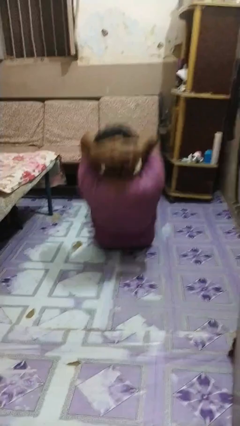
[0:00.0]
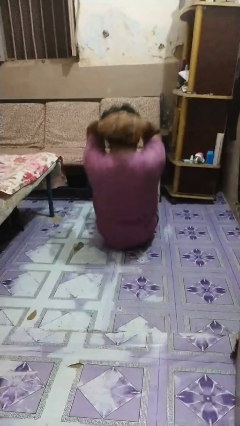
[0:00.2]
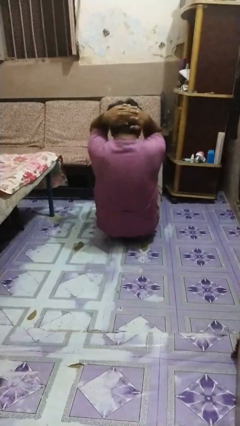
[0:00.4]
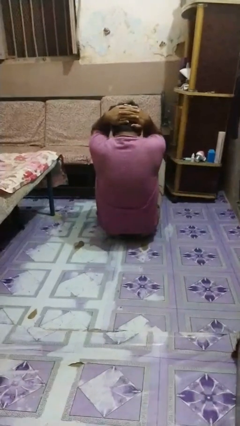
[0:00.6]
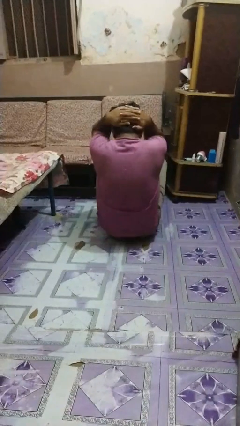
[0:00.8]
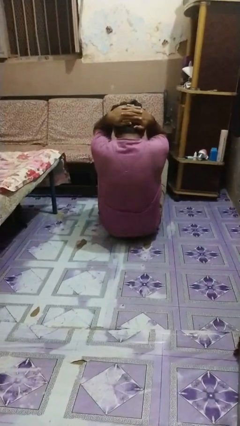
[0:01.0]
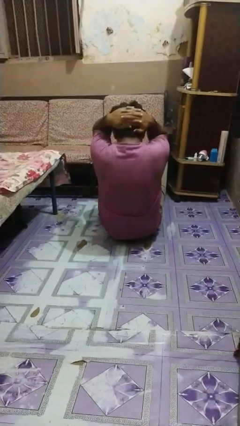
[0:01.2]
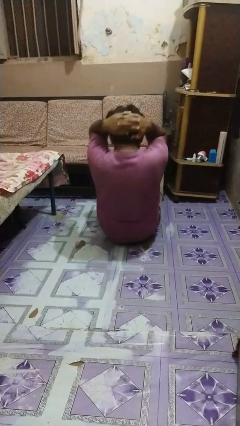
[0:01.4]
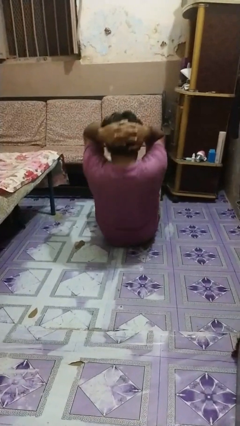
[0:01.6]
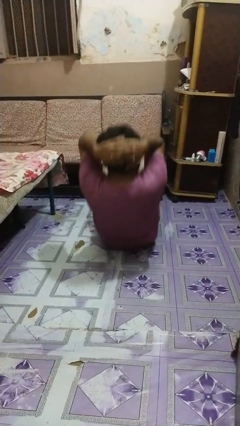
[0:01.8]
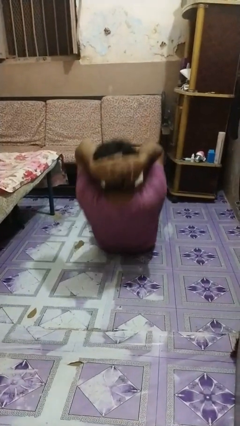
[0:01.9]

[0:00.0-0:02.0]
person exercises with situp

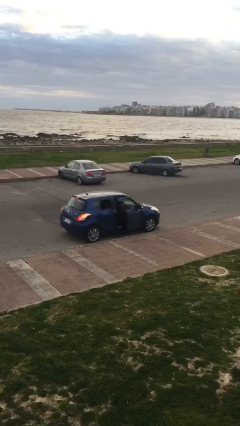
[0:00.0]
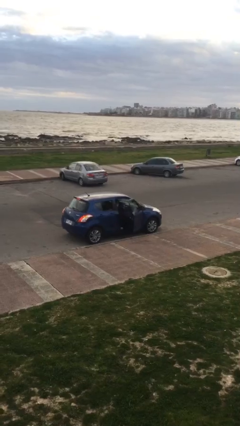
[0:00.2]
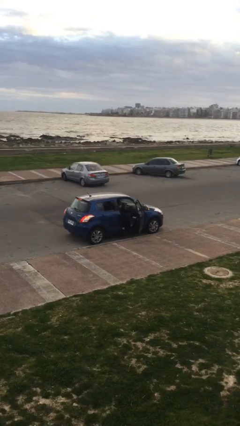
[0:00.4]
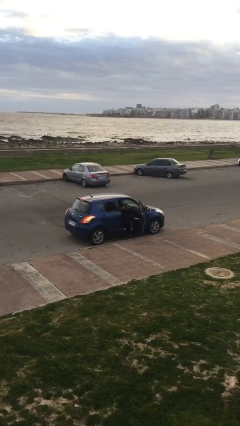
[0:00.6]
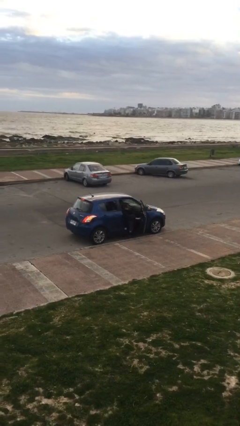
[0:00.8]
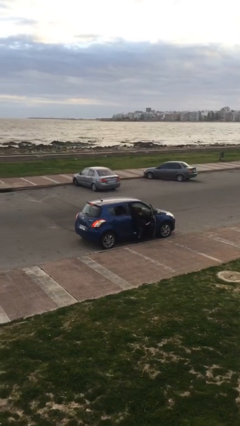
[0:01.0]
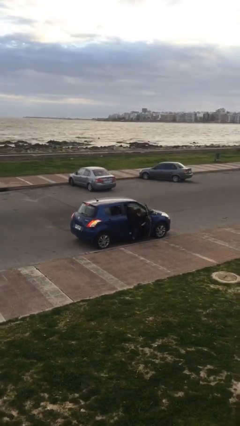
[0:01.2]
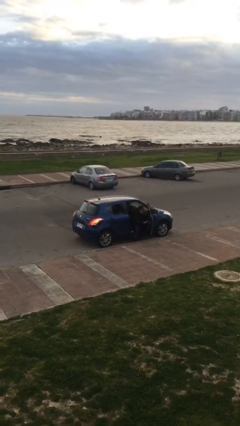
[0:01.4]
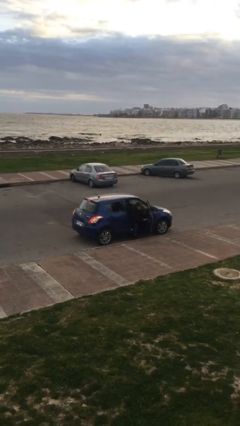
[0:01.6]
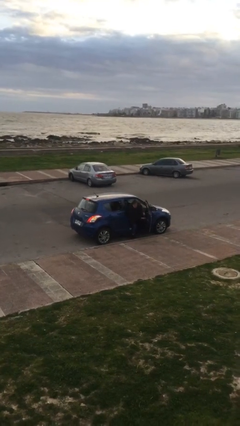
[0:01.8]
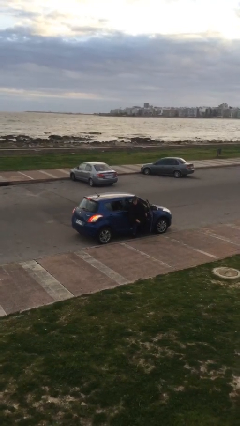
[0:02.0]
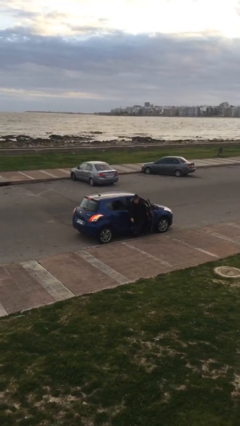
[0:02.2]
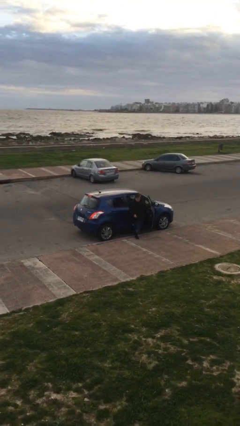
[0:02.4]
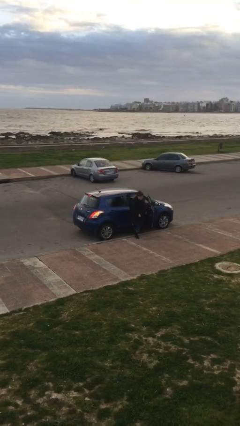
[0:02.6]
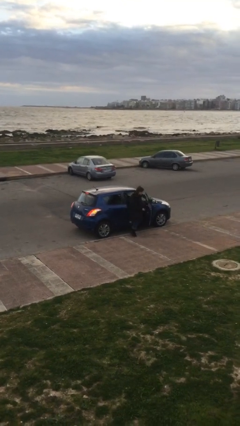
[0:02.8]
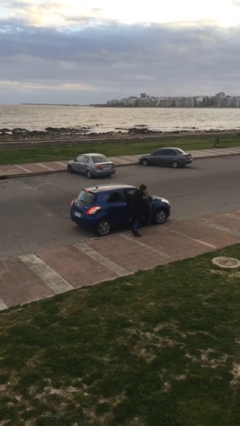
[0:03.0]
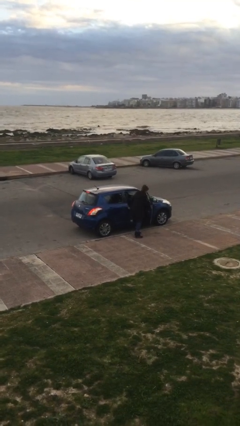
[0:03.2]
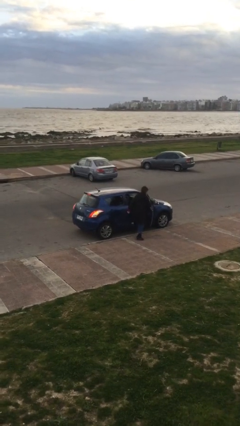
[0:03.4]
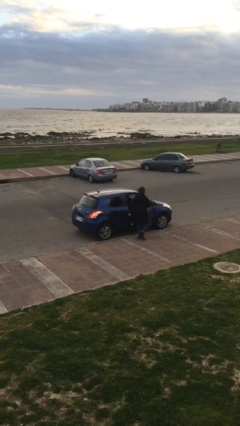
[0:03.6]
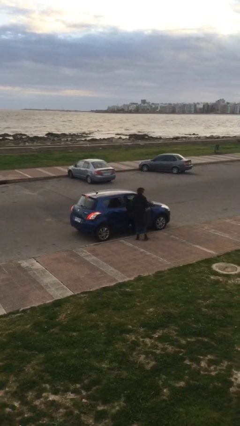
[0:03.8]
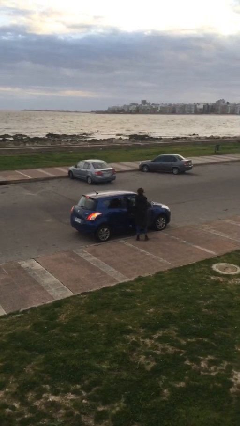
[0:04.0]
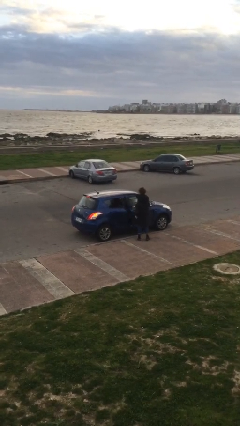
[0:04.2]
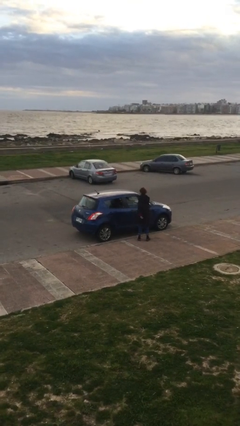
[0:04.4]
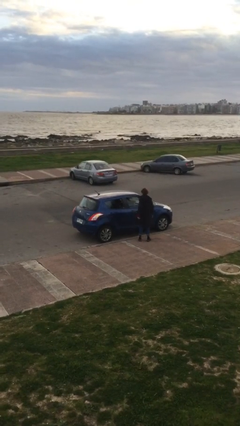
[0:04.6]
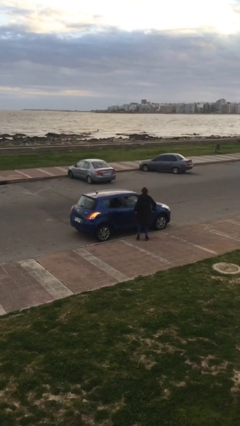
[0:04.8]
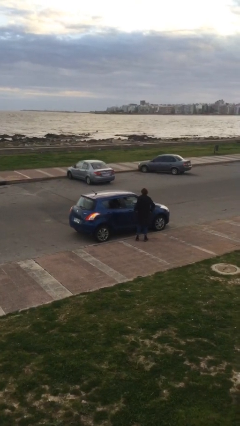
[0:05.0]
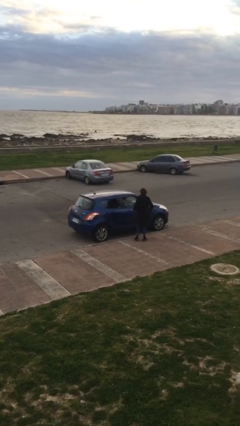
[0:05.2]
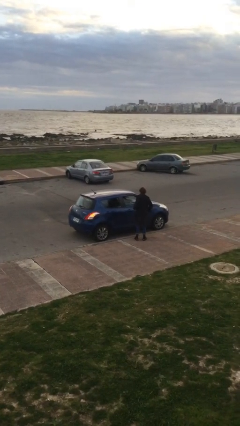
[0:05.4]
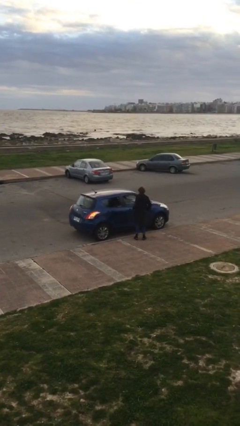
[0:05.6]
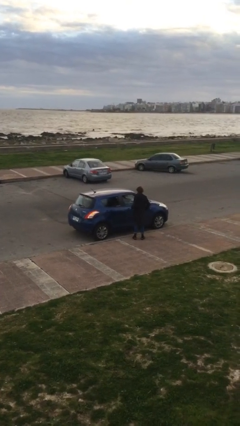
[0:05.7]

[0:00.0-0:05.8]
car drops off person

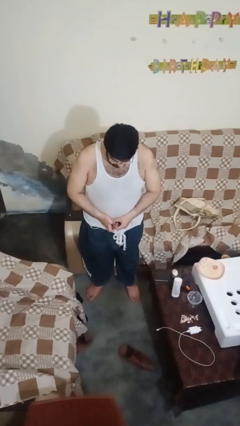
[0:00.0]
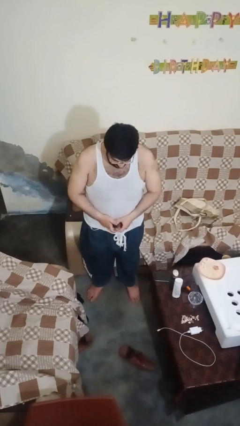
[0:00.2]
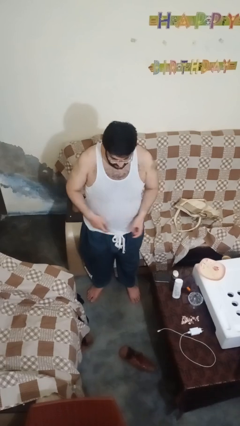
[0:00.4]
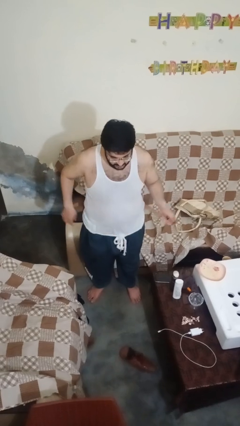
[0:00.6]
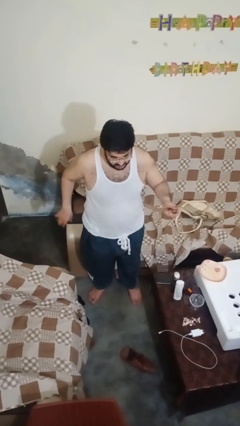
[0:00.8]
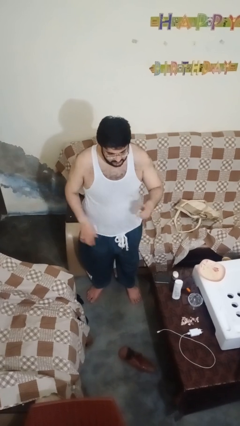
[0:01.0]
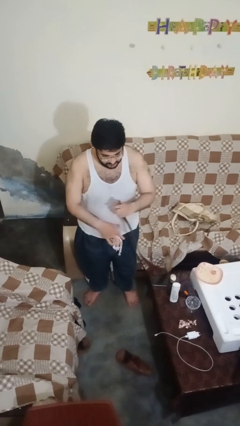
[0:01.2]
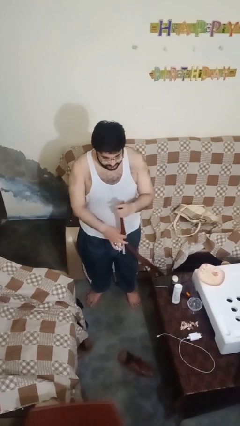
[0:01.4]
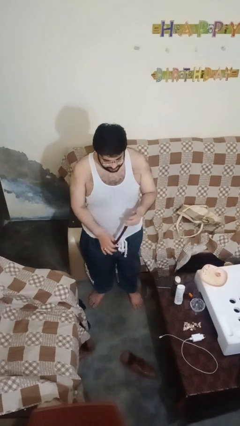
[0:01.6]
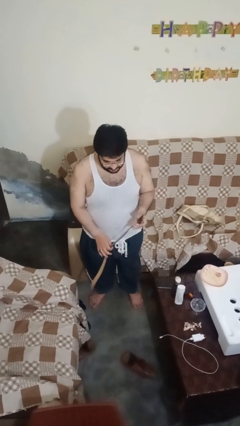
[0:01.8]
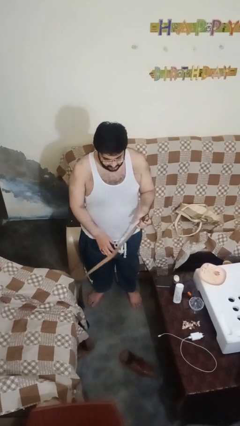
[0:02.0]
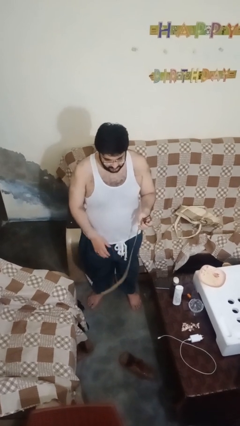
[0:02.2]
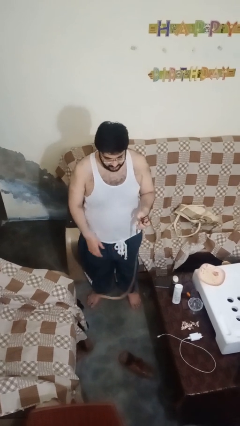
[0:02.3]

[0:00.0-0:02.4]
person takes off belt

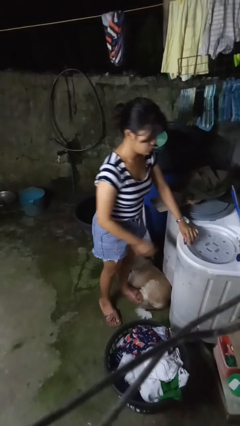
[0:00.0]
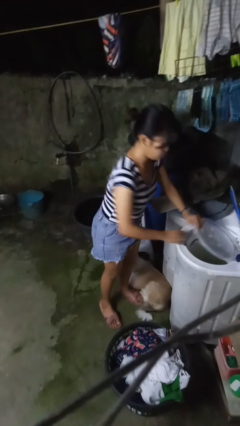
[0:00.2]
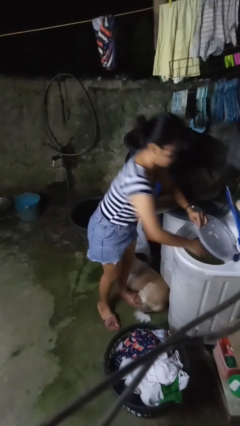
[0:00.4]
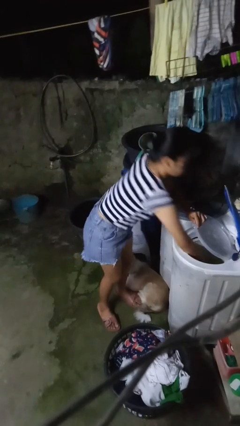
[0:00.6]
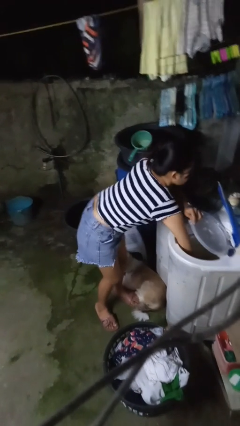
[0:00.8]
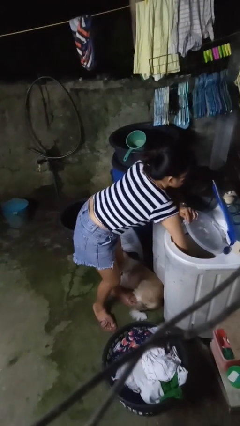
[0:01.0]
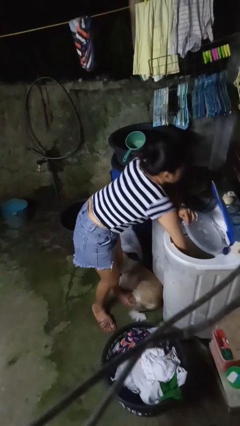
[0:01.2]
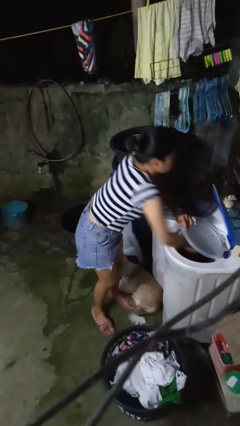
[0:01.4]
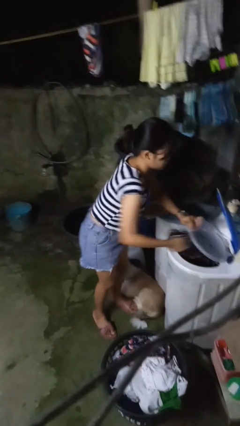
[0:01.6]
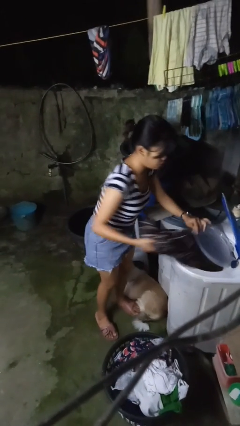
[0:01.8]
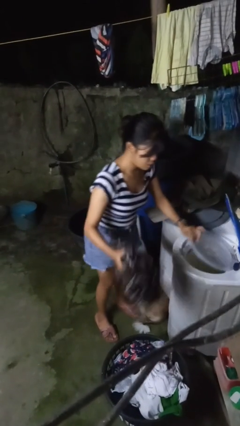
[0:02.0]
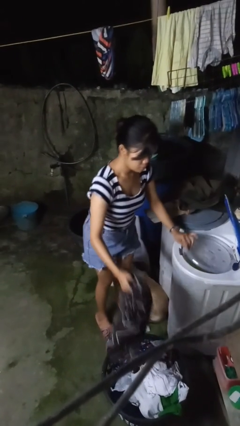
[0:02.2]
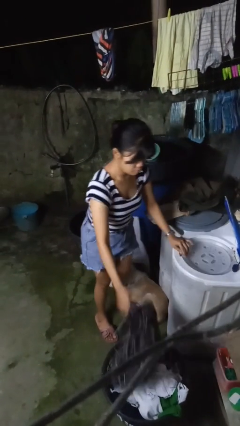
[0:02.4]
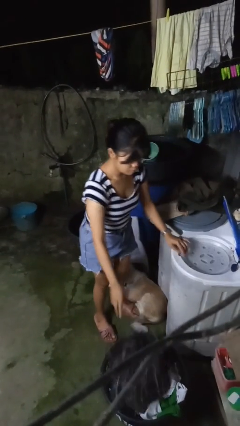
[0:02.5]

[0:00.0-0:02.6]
person unloads dryer

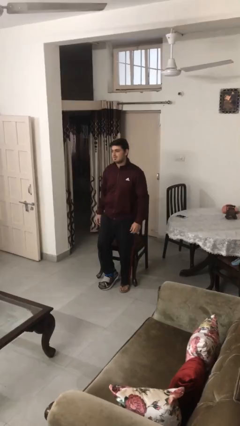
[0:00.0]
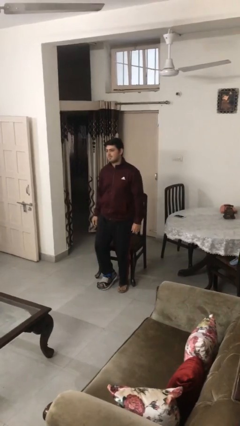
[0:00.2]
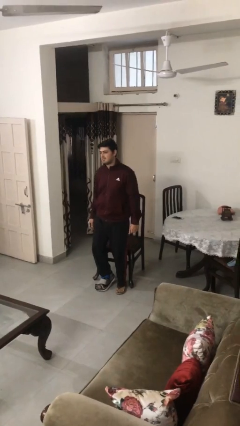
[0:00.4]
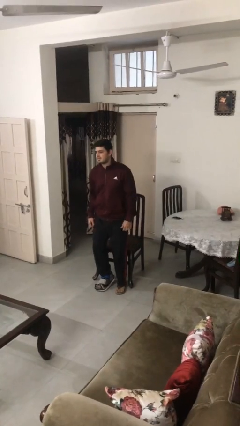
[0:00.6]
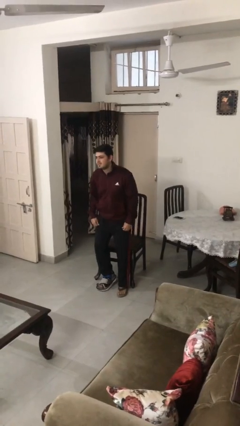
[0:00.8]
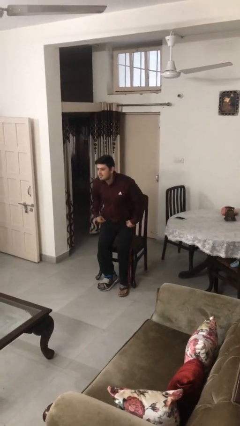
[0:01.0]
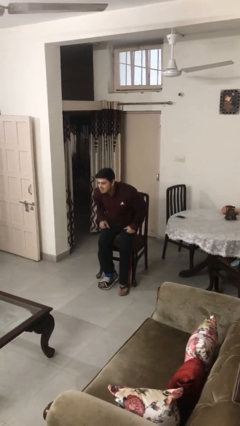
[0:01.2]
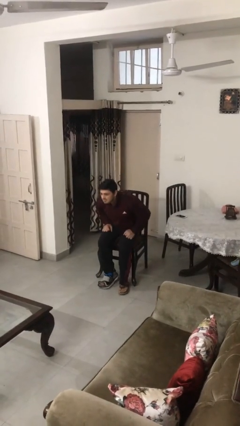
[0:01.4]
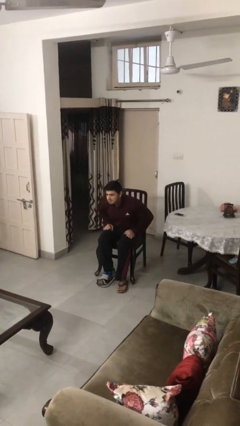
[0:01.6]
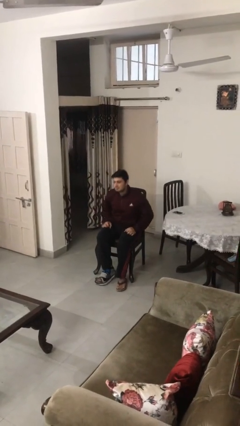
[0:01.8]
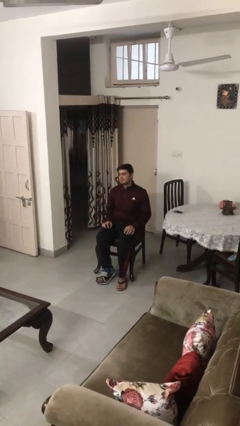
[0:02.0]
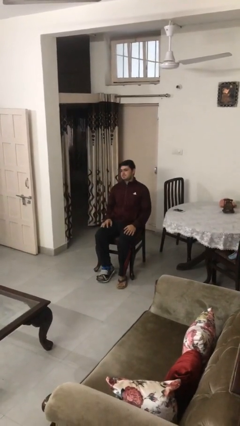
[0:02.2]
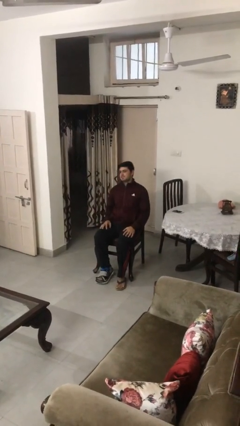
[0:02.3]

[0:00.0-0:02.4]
person sits down

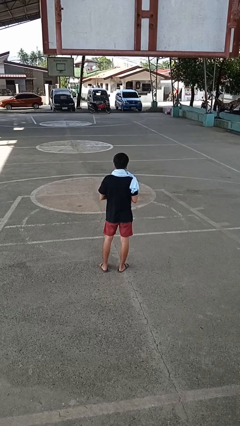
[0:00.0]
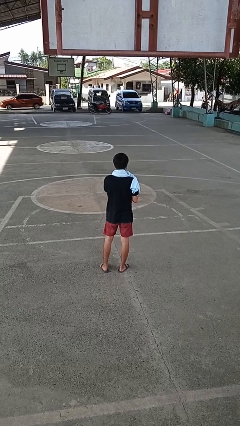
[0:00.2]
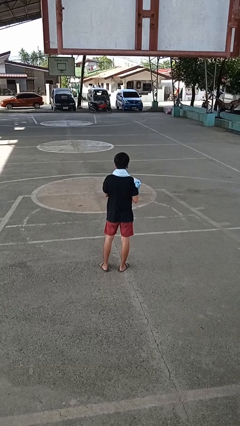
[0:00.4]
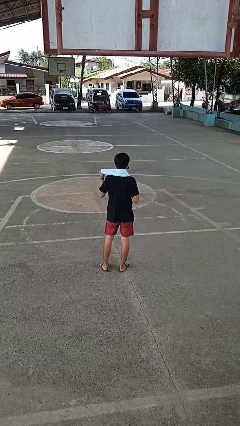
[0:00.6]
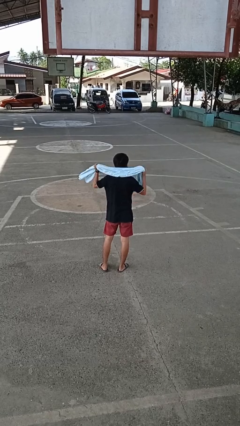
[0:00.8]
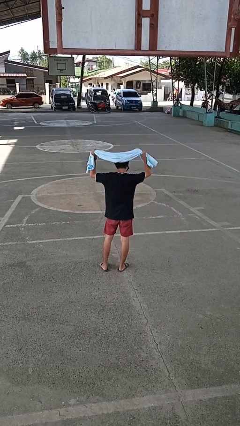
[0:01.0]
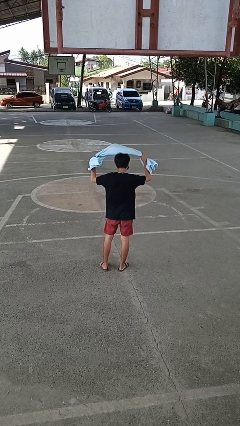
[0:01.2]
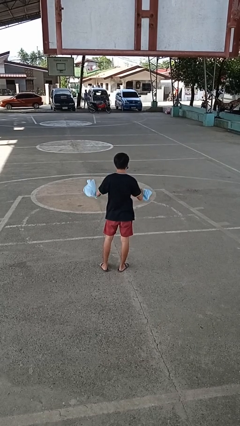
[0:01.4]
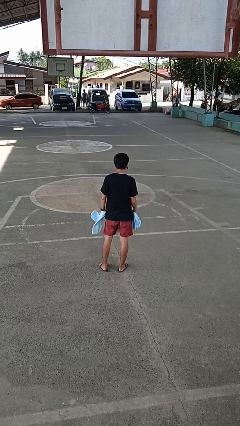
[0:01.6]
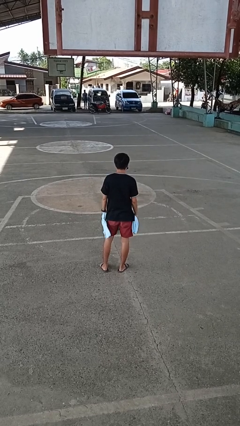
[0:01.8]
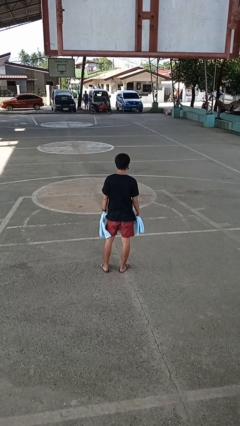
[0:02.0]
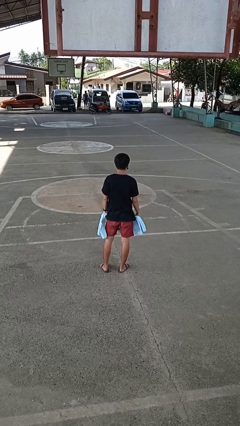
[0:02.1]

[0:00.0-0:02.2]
person takes off scarf
